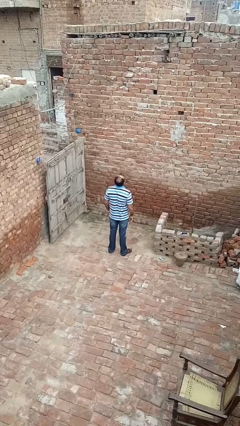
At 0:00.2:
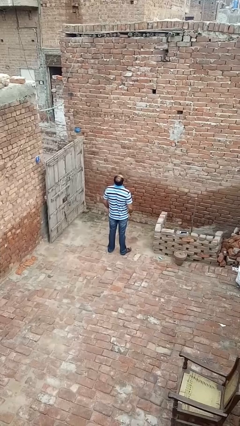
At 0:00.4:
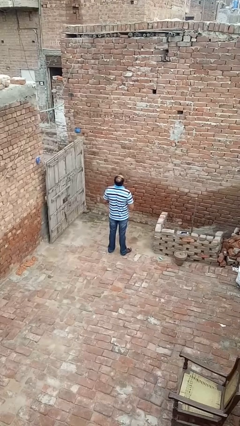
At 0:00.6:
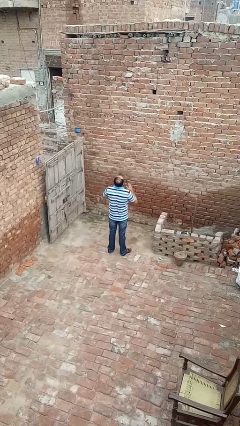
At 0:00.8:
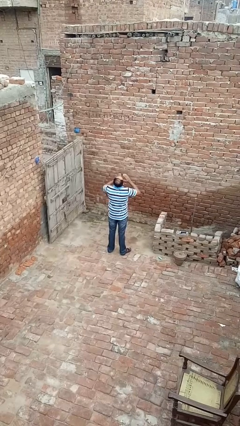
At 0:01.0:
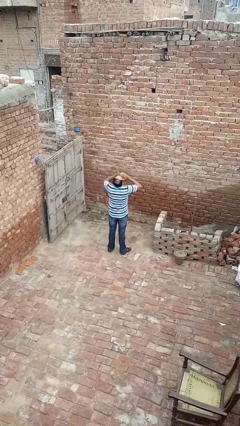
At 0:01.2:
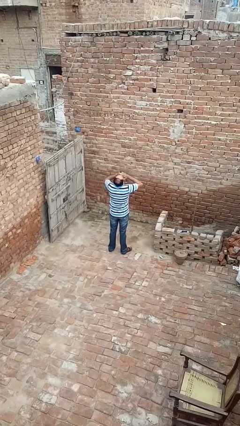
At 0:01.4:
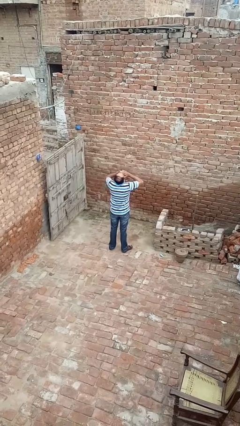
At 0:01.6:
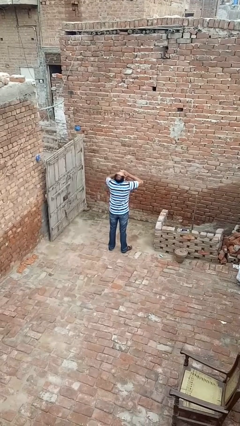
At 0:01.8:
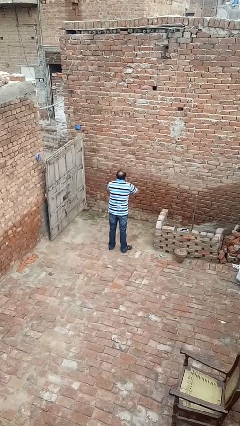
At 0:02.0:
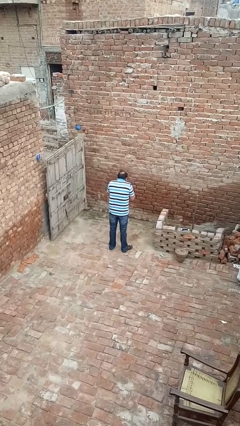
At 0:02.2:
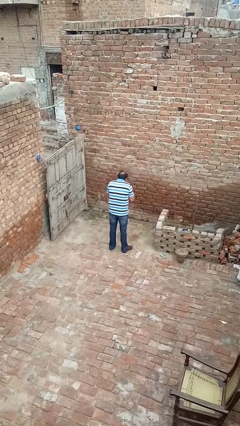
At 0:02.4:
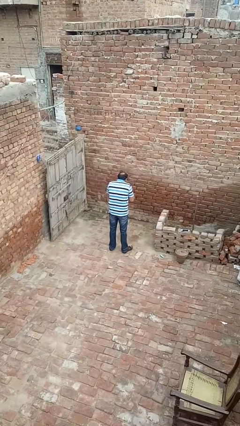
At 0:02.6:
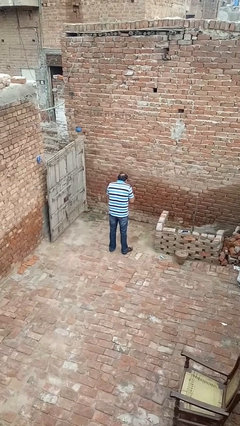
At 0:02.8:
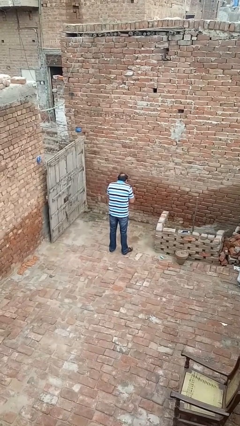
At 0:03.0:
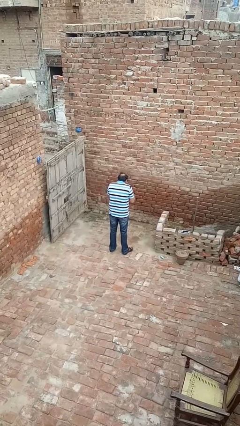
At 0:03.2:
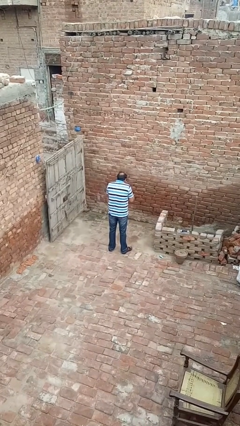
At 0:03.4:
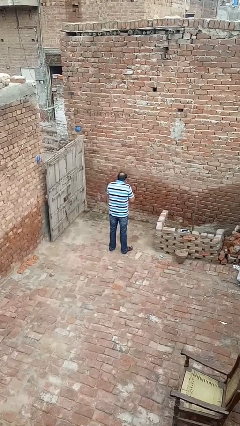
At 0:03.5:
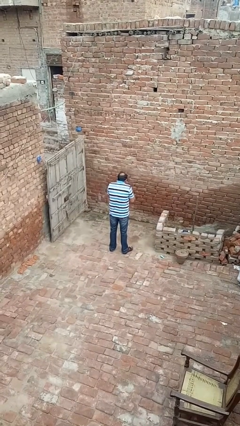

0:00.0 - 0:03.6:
person sneezes into hand

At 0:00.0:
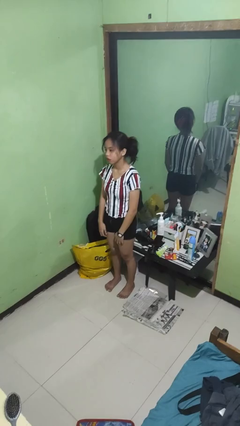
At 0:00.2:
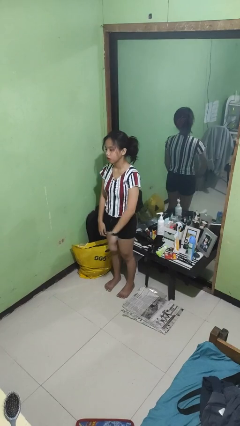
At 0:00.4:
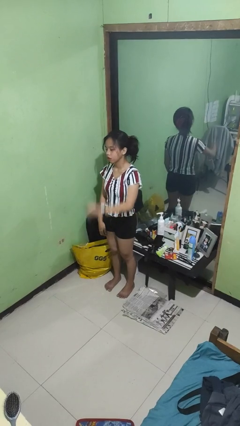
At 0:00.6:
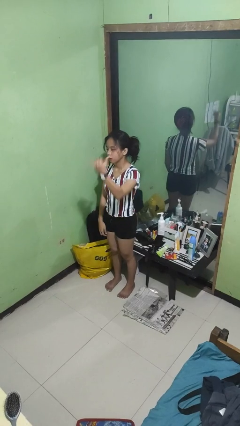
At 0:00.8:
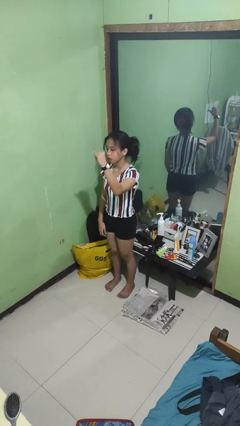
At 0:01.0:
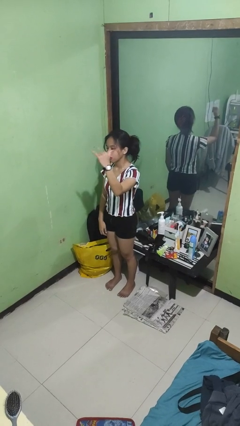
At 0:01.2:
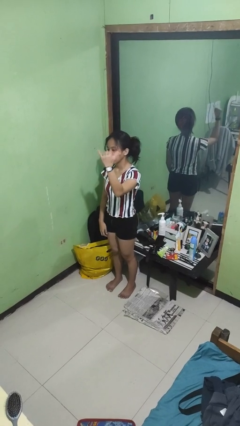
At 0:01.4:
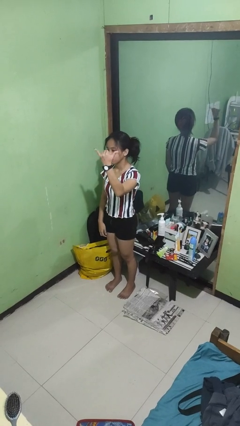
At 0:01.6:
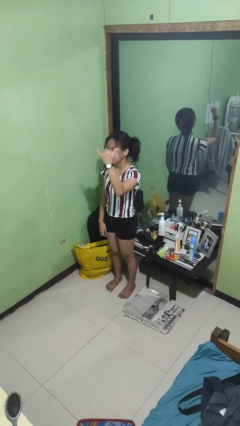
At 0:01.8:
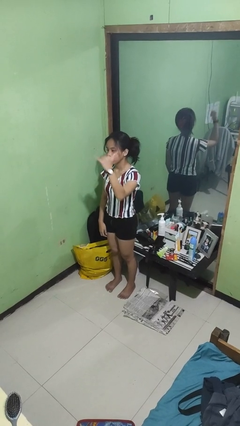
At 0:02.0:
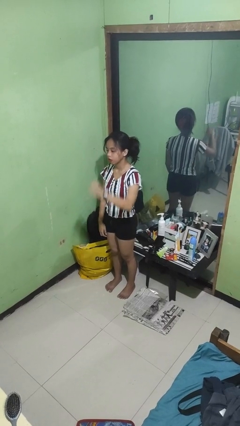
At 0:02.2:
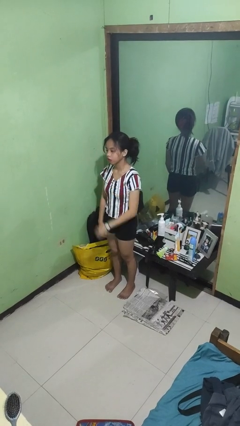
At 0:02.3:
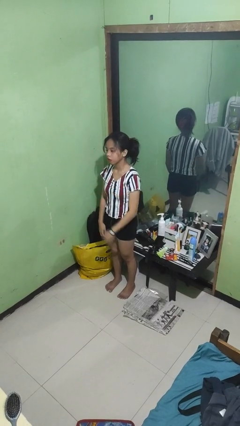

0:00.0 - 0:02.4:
person gestures hang loose

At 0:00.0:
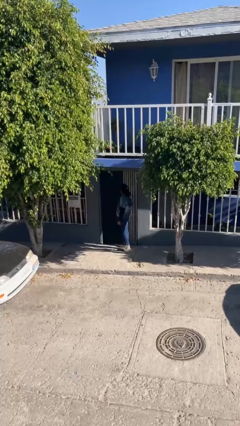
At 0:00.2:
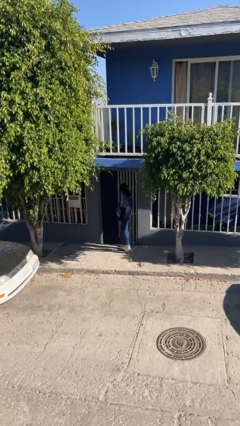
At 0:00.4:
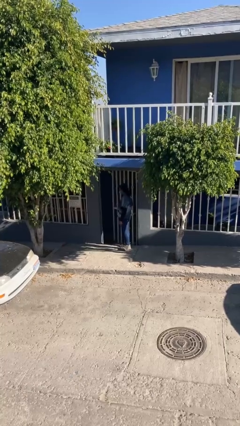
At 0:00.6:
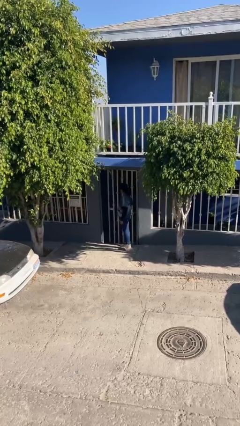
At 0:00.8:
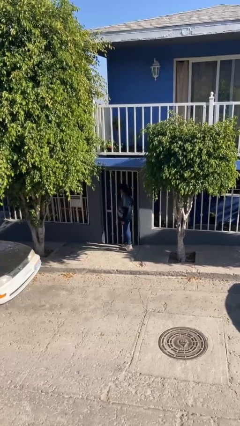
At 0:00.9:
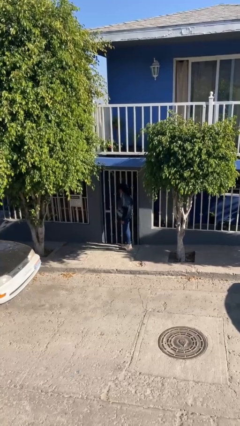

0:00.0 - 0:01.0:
person closes facility door

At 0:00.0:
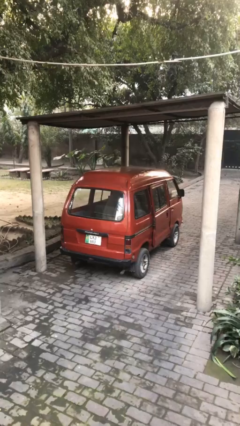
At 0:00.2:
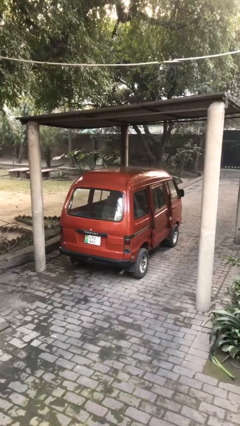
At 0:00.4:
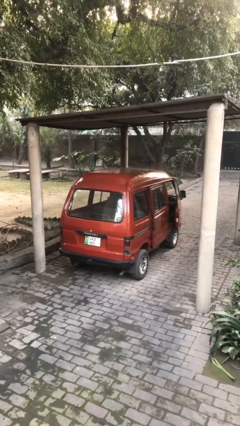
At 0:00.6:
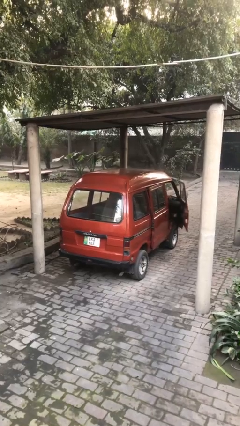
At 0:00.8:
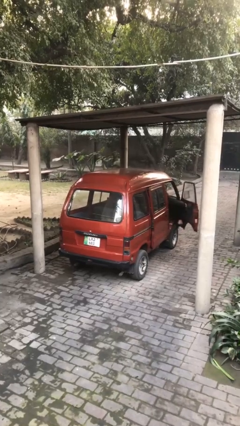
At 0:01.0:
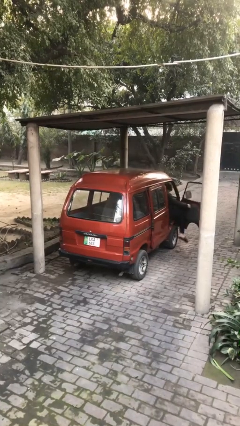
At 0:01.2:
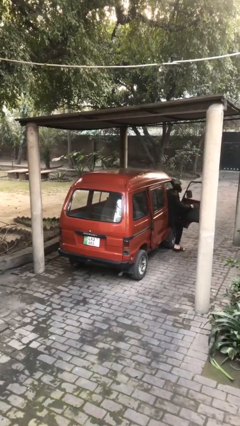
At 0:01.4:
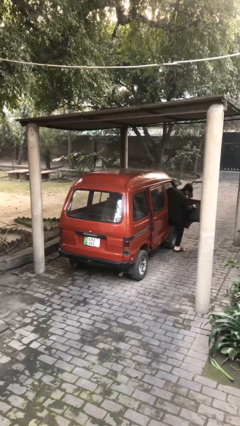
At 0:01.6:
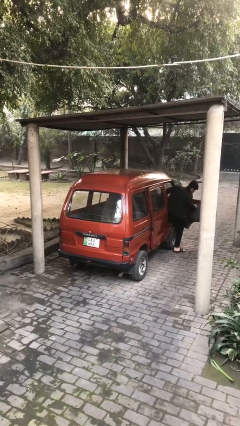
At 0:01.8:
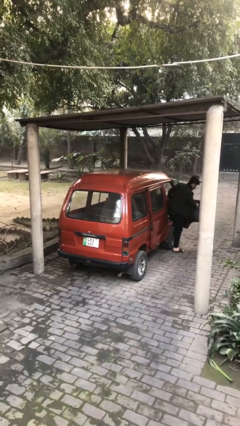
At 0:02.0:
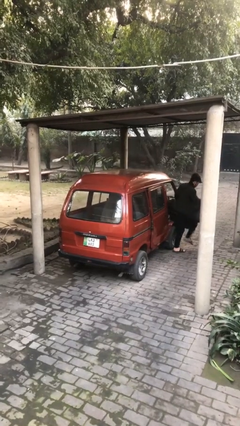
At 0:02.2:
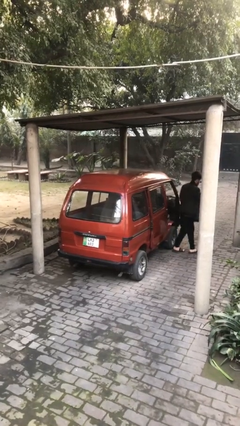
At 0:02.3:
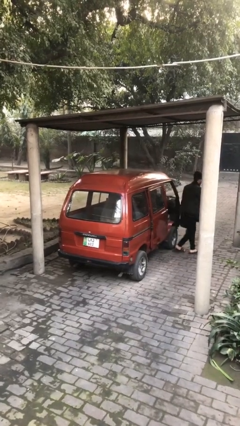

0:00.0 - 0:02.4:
car drops off person

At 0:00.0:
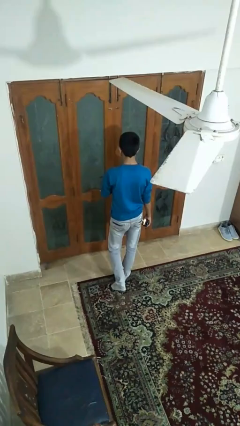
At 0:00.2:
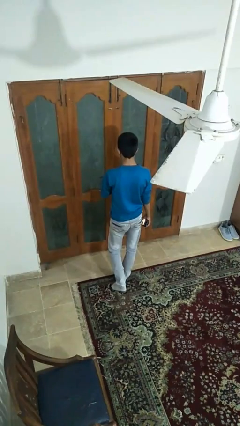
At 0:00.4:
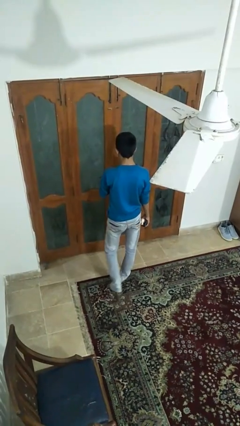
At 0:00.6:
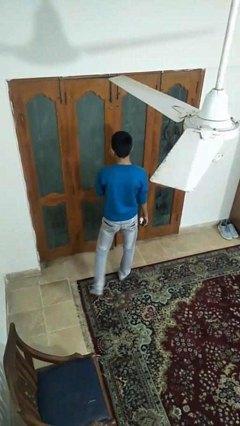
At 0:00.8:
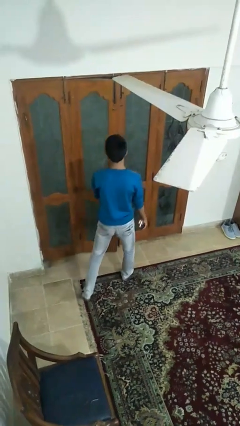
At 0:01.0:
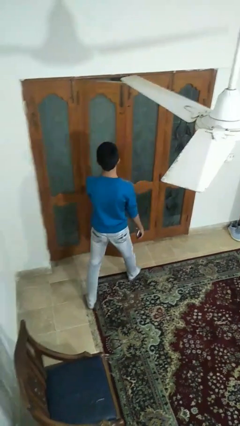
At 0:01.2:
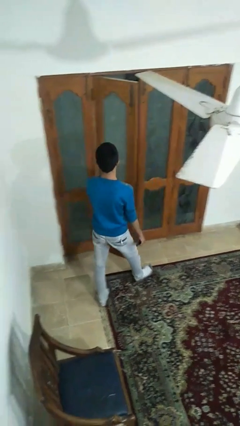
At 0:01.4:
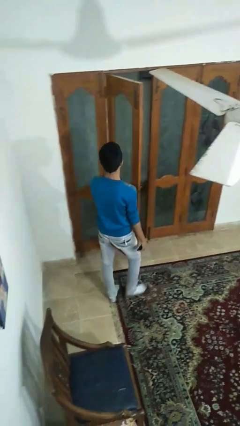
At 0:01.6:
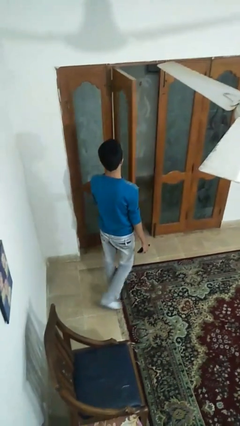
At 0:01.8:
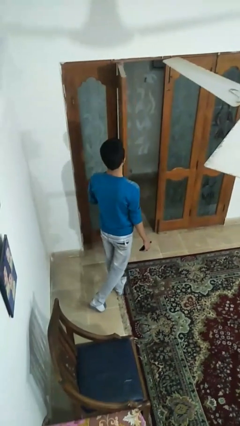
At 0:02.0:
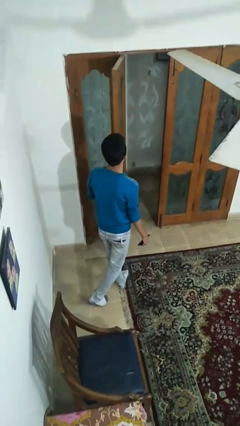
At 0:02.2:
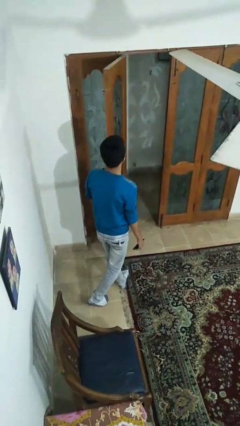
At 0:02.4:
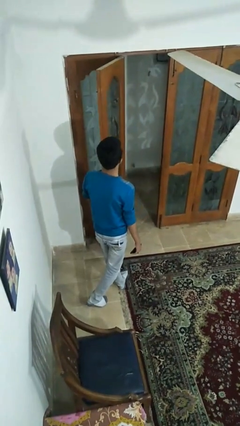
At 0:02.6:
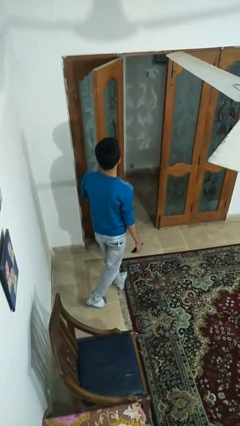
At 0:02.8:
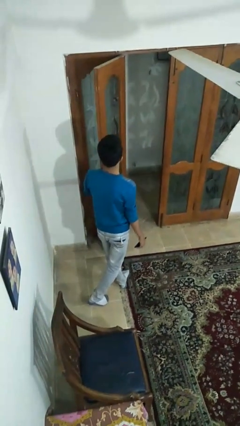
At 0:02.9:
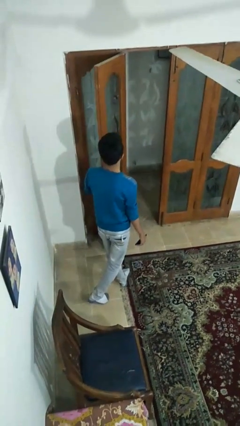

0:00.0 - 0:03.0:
person opens facility door

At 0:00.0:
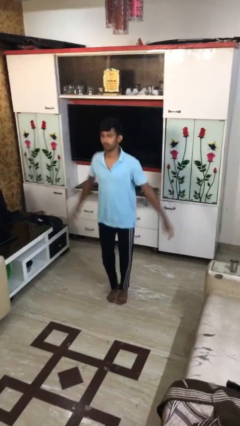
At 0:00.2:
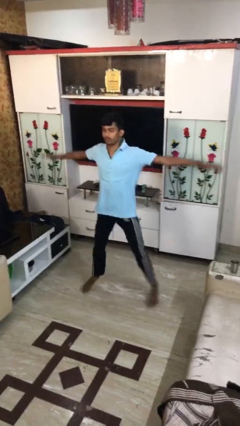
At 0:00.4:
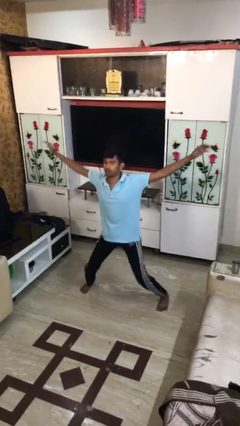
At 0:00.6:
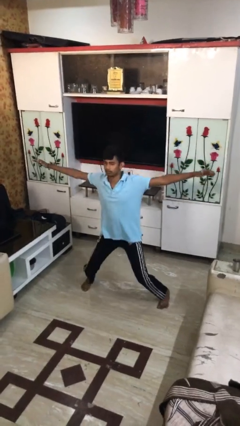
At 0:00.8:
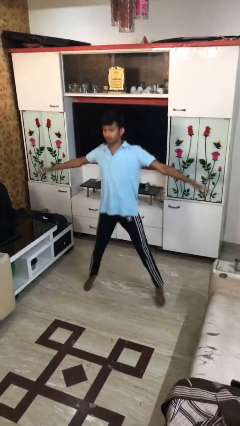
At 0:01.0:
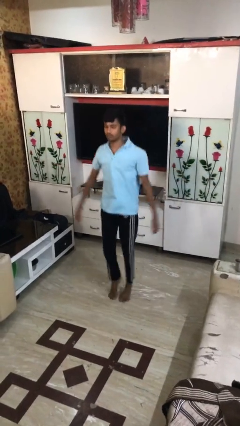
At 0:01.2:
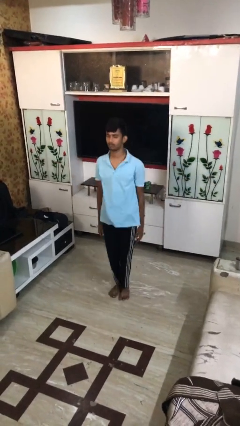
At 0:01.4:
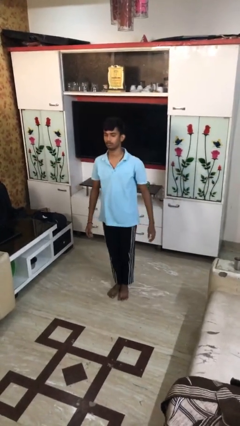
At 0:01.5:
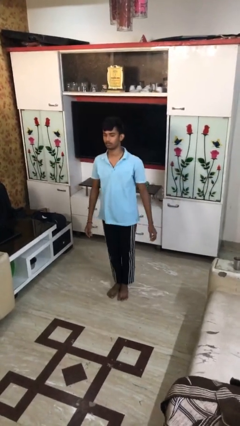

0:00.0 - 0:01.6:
person exercises with jumping jacks

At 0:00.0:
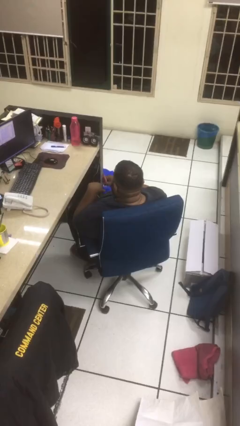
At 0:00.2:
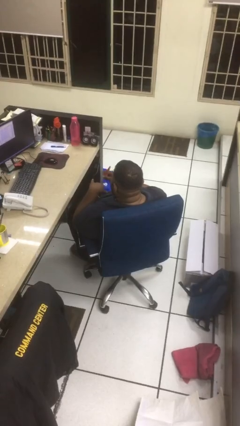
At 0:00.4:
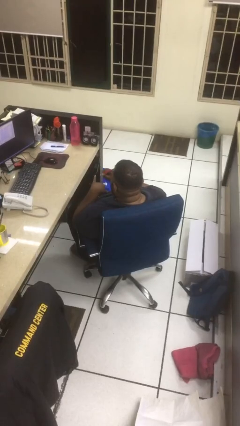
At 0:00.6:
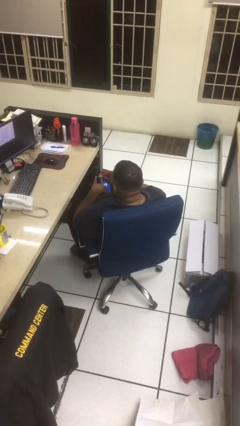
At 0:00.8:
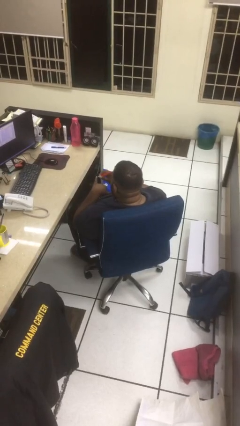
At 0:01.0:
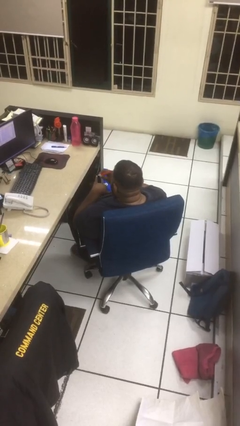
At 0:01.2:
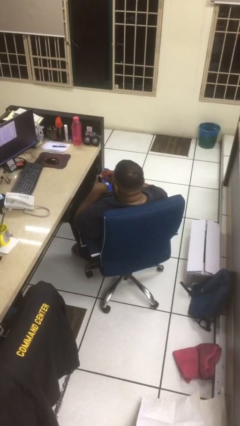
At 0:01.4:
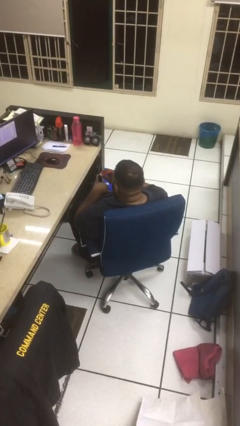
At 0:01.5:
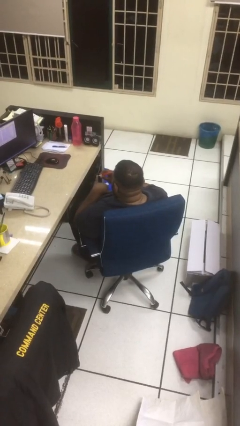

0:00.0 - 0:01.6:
person paints fingernails

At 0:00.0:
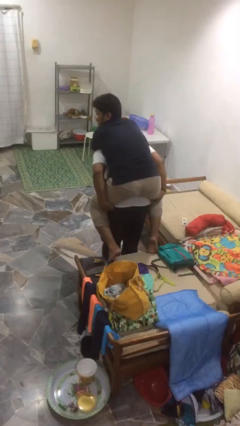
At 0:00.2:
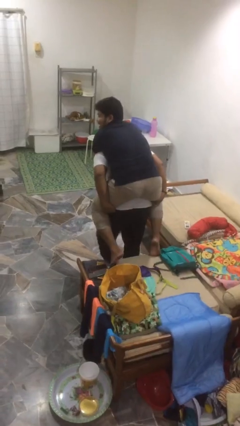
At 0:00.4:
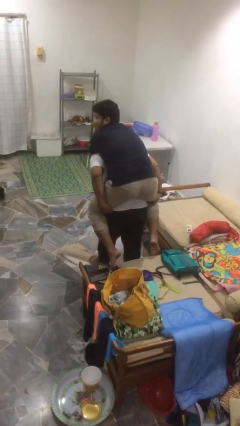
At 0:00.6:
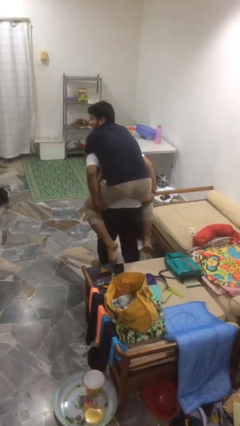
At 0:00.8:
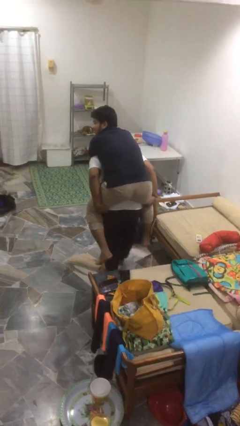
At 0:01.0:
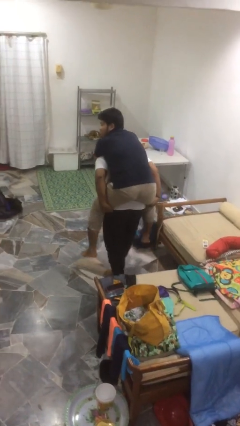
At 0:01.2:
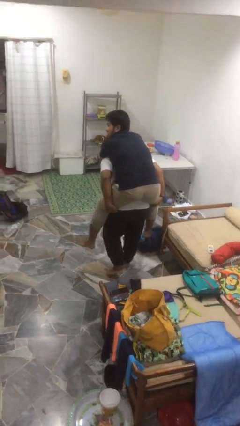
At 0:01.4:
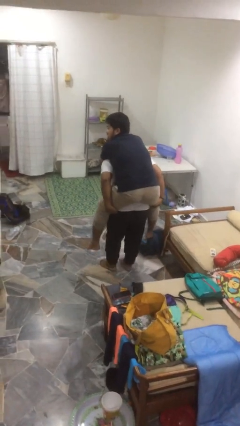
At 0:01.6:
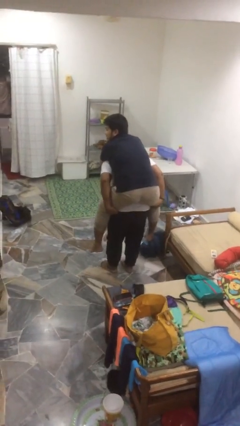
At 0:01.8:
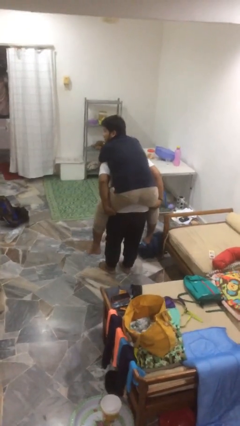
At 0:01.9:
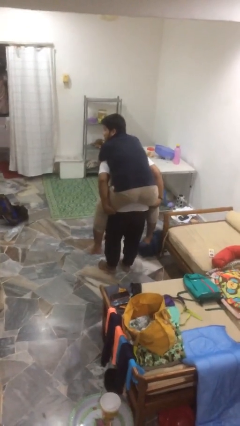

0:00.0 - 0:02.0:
person carries person on back
